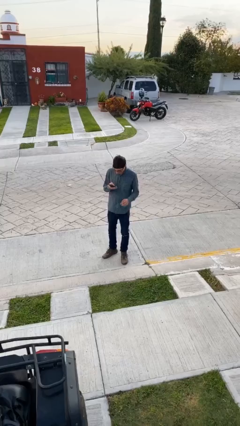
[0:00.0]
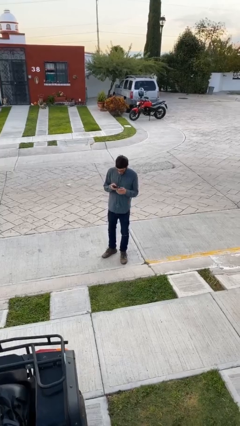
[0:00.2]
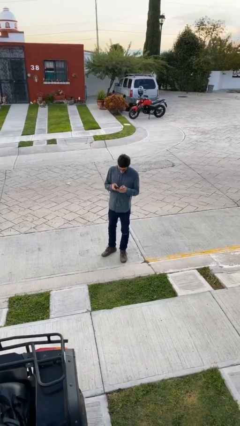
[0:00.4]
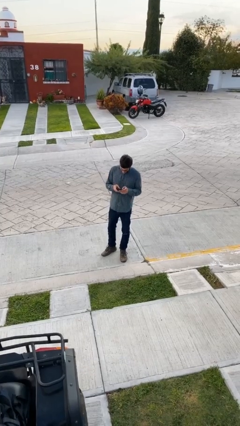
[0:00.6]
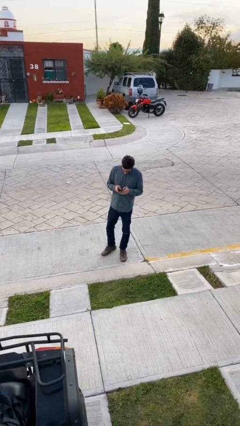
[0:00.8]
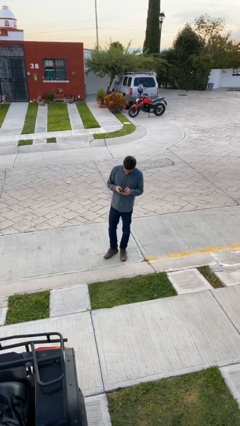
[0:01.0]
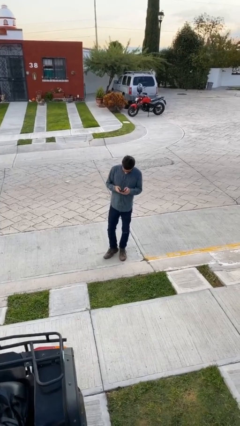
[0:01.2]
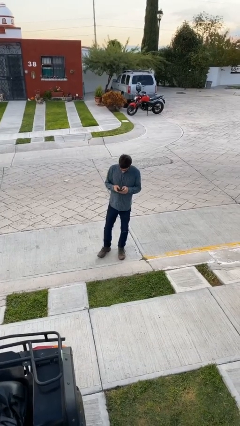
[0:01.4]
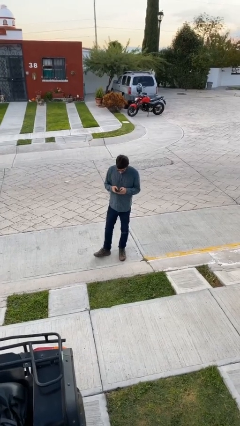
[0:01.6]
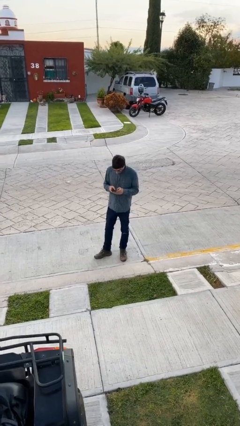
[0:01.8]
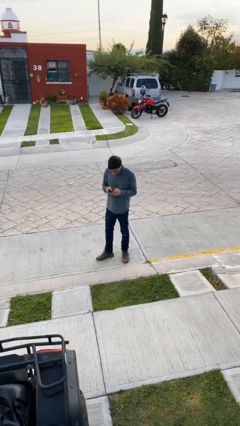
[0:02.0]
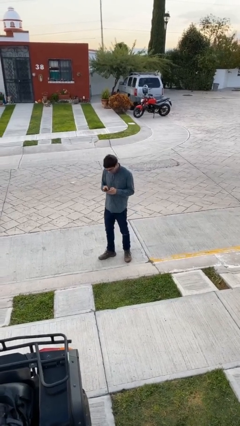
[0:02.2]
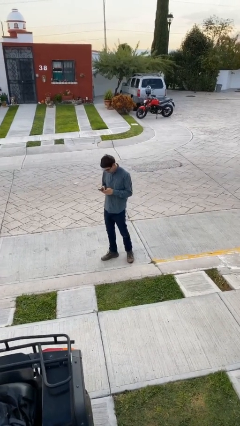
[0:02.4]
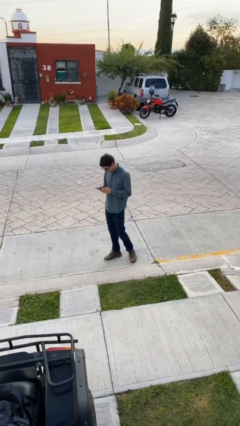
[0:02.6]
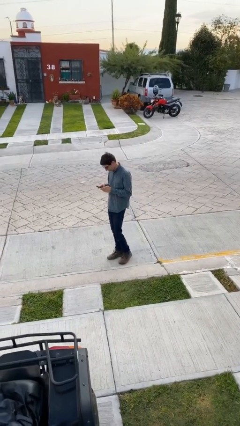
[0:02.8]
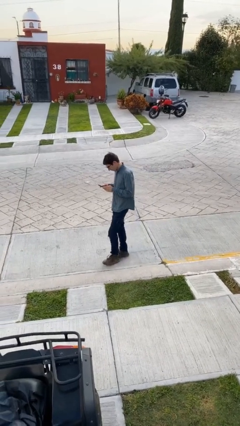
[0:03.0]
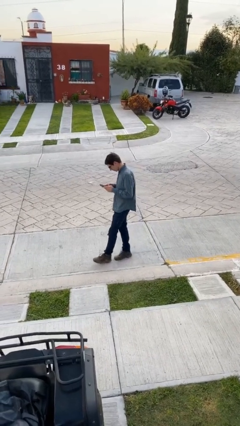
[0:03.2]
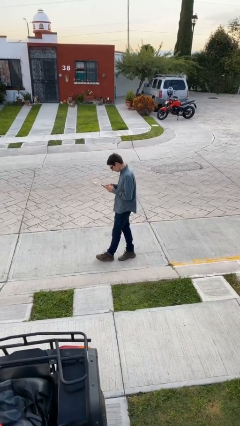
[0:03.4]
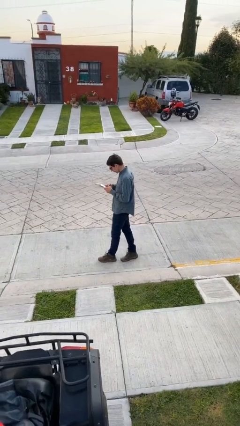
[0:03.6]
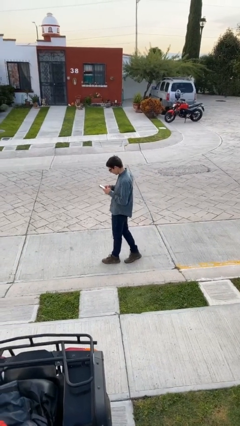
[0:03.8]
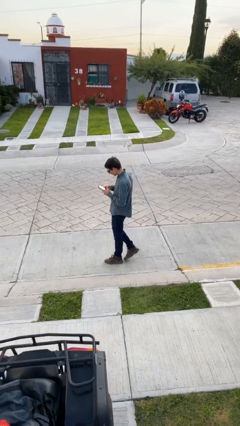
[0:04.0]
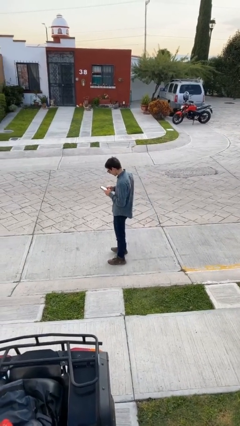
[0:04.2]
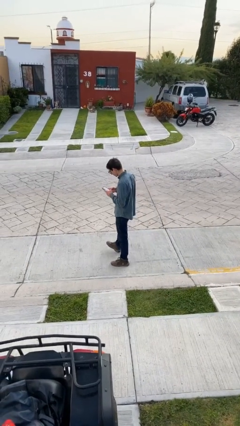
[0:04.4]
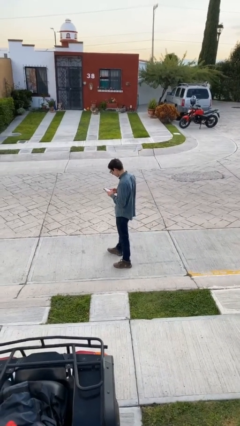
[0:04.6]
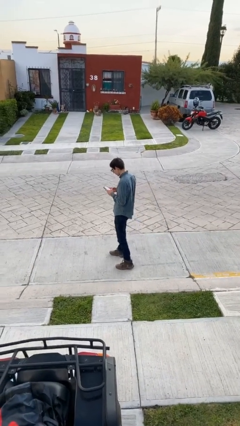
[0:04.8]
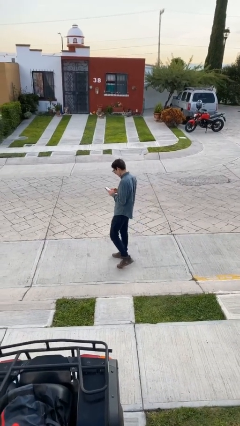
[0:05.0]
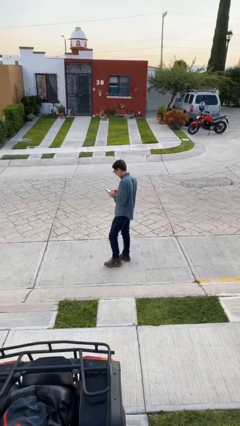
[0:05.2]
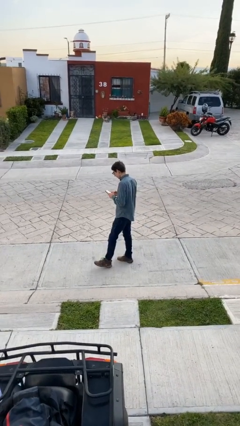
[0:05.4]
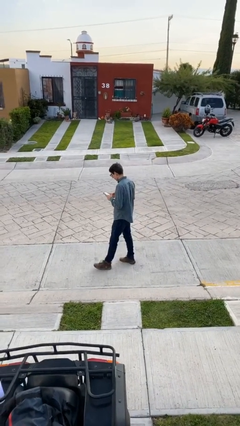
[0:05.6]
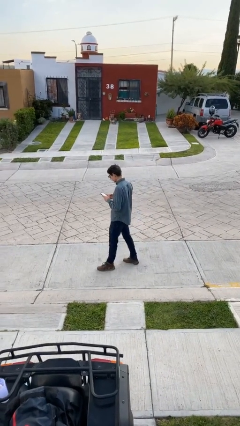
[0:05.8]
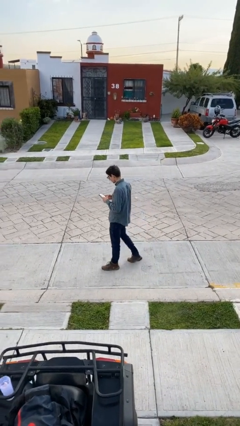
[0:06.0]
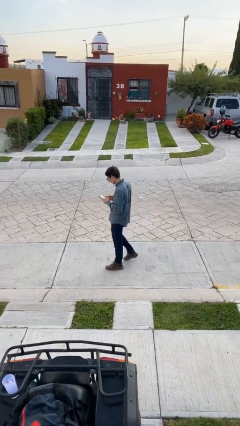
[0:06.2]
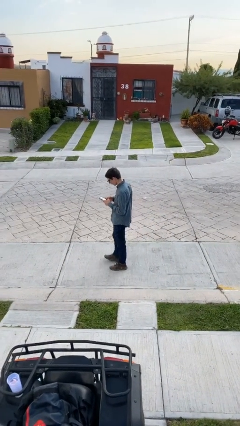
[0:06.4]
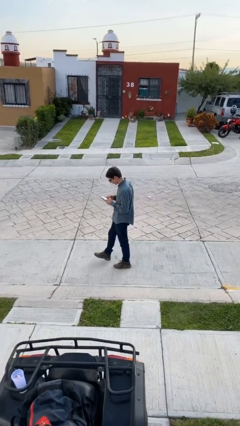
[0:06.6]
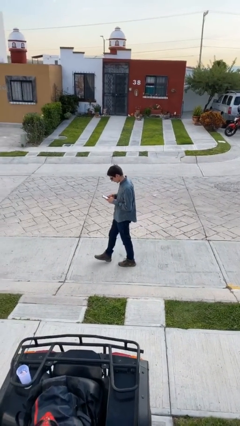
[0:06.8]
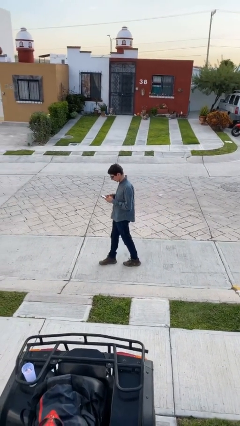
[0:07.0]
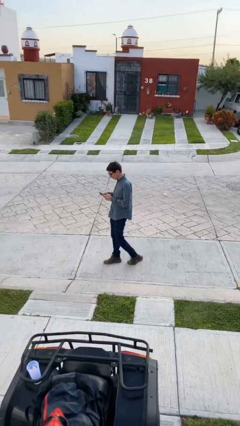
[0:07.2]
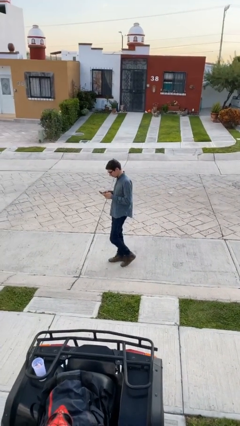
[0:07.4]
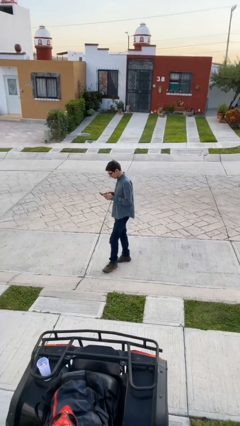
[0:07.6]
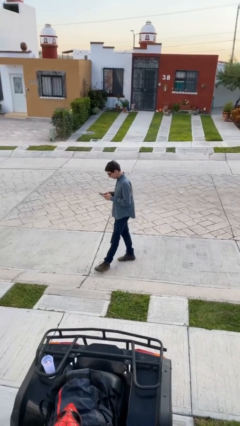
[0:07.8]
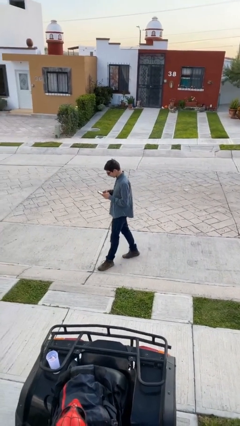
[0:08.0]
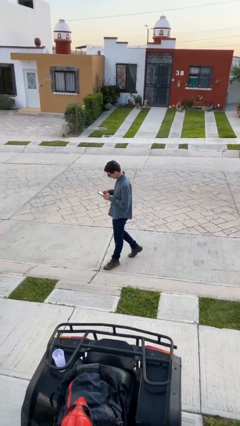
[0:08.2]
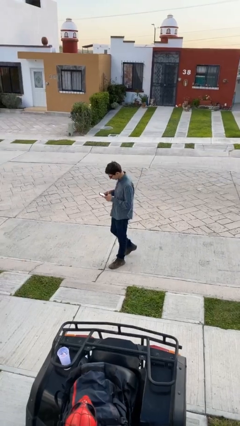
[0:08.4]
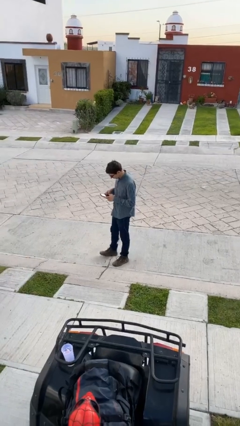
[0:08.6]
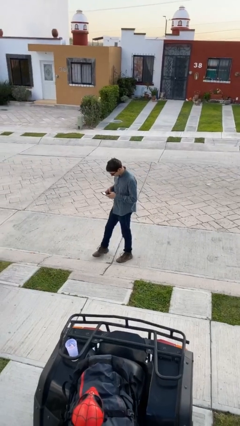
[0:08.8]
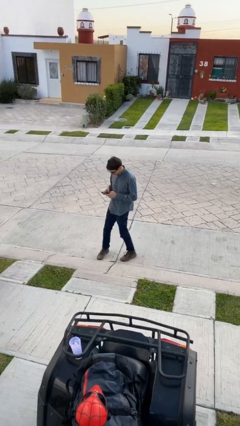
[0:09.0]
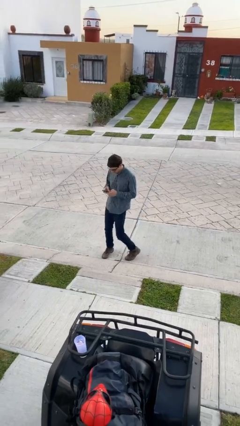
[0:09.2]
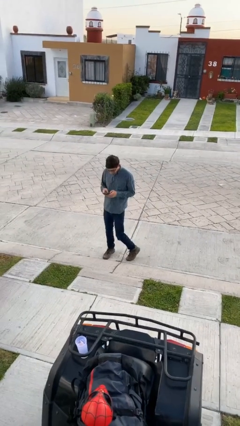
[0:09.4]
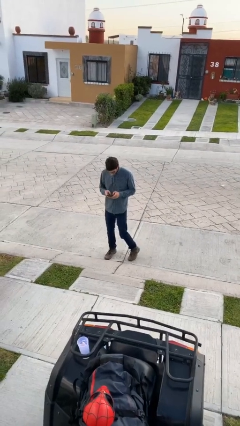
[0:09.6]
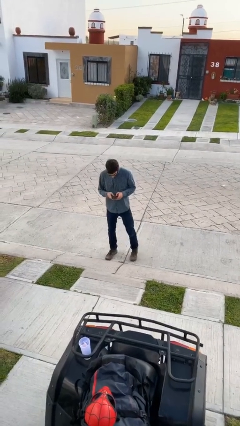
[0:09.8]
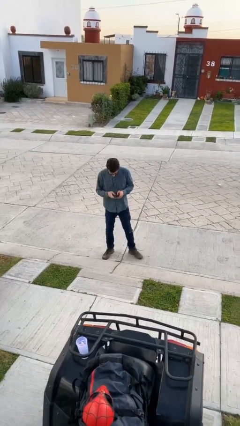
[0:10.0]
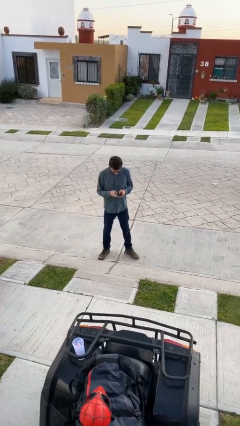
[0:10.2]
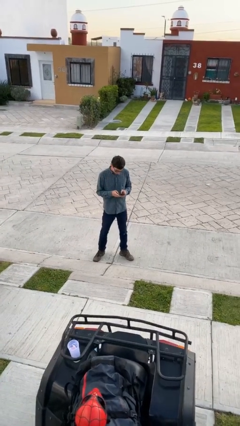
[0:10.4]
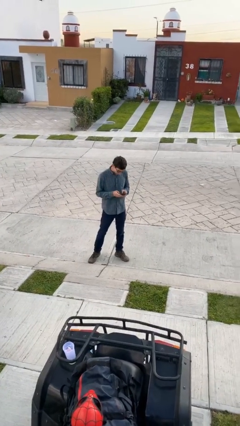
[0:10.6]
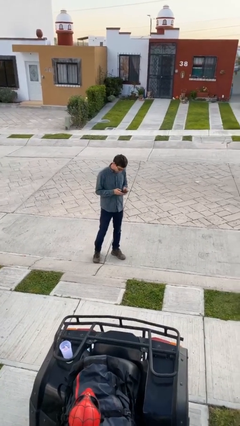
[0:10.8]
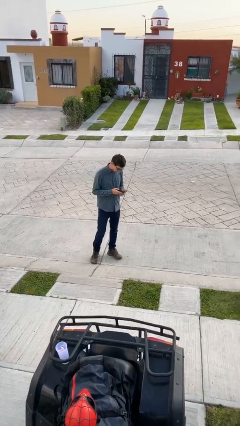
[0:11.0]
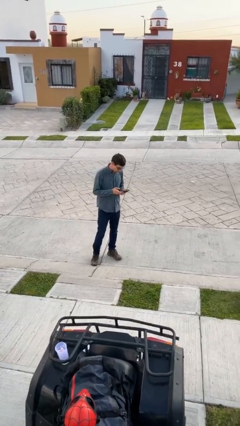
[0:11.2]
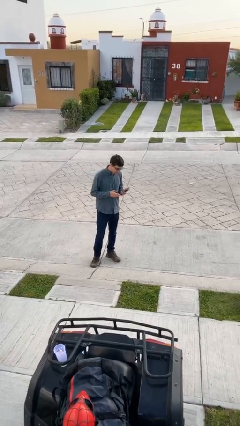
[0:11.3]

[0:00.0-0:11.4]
person texts on phone

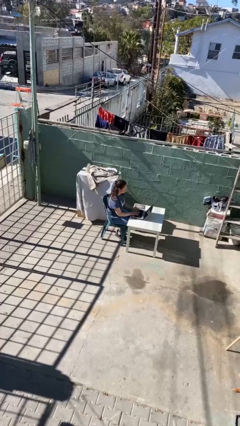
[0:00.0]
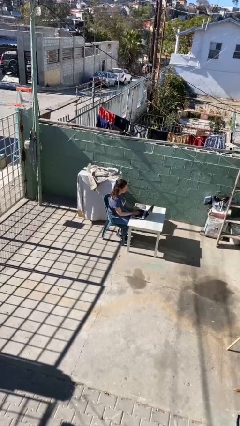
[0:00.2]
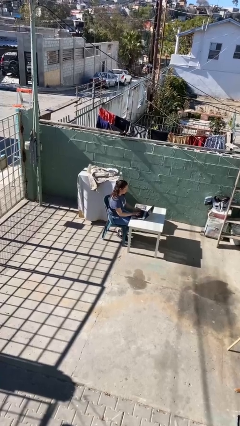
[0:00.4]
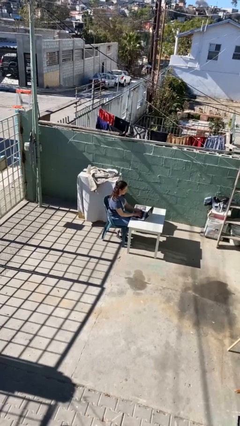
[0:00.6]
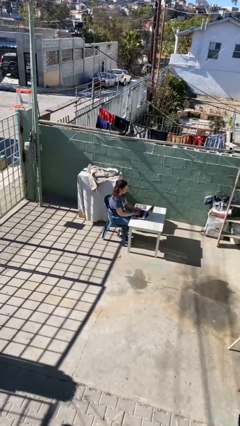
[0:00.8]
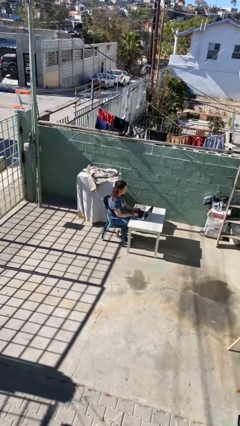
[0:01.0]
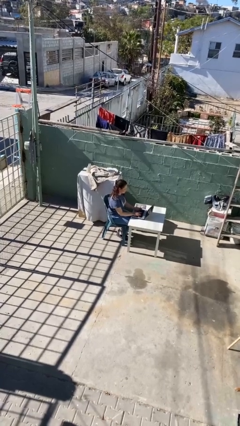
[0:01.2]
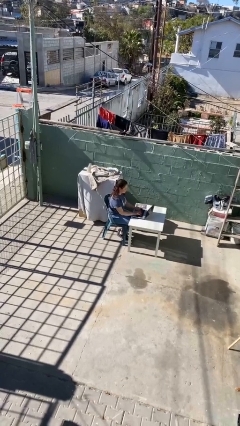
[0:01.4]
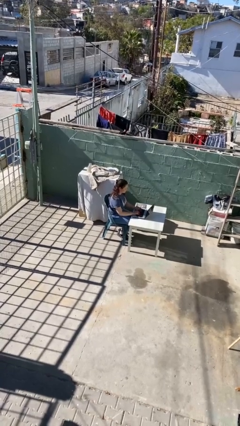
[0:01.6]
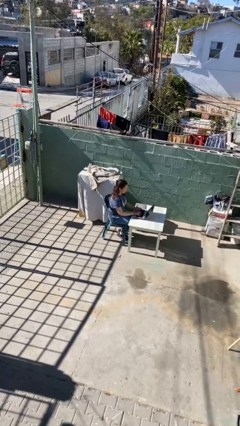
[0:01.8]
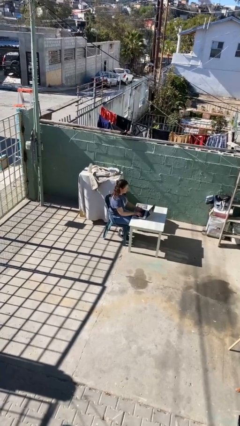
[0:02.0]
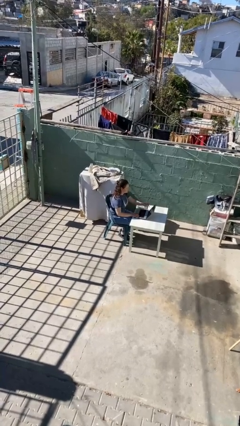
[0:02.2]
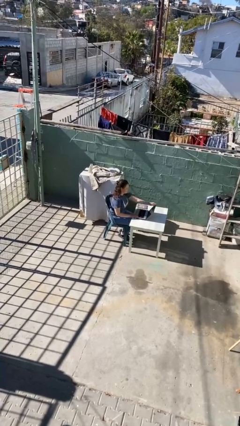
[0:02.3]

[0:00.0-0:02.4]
person interacts with laptop

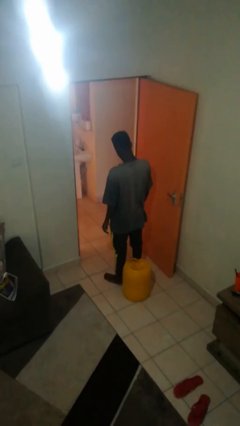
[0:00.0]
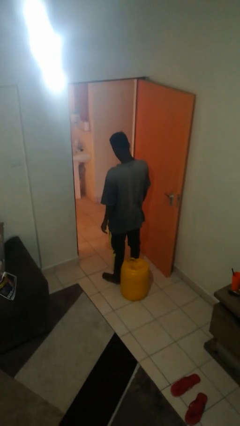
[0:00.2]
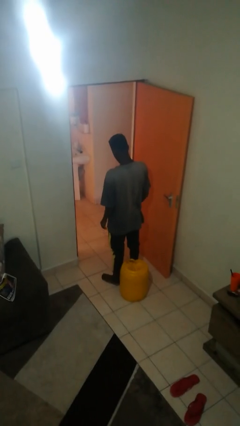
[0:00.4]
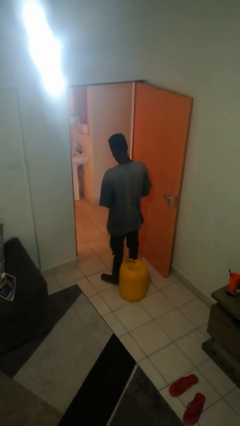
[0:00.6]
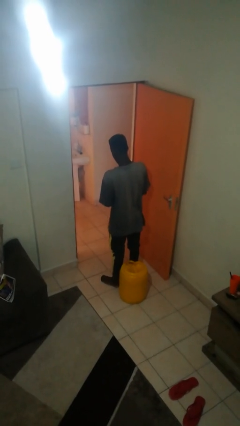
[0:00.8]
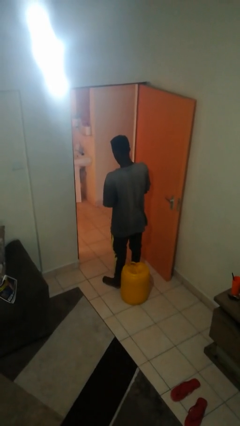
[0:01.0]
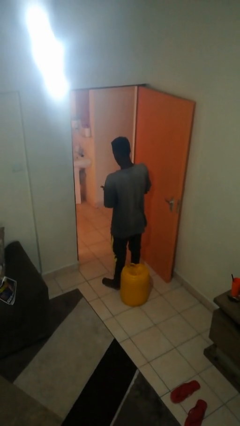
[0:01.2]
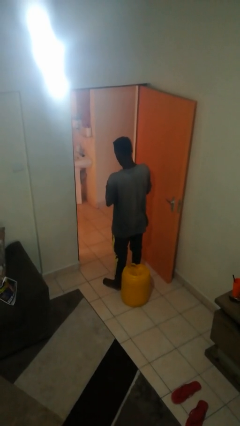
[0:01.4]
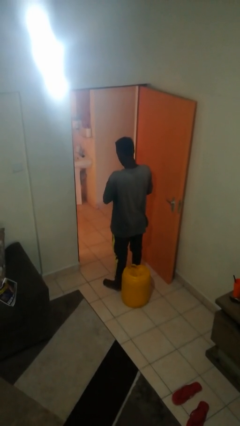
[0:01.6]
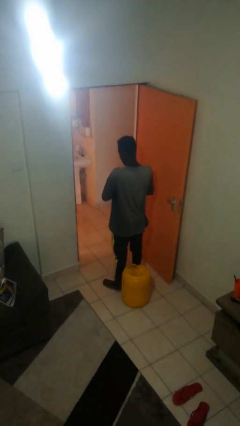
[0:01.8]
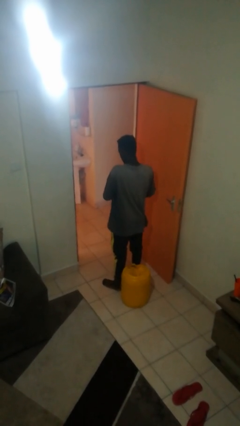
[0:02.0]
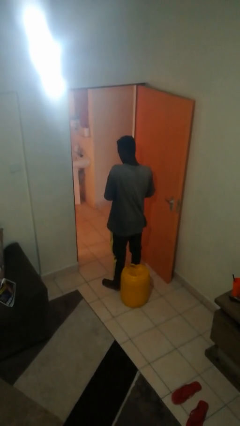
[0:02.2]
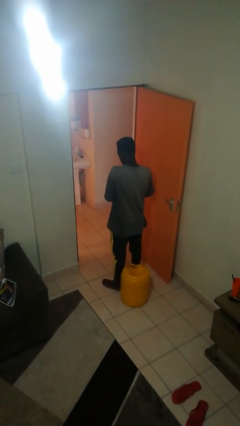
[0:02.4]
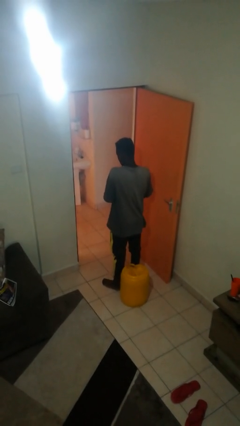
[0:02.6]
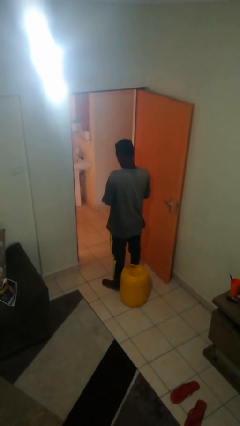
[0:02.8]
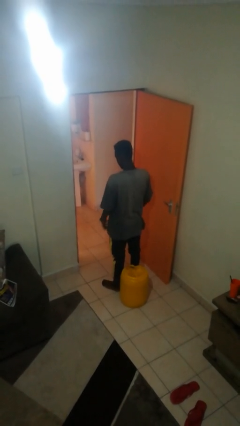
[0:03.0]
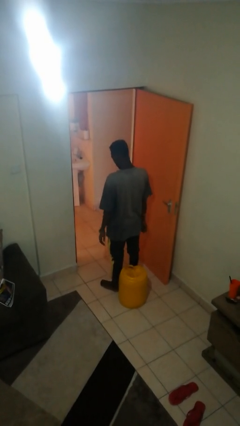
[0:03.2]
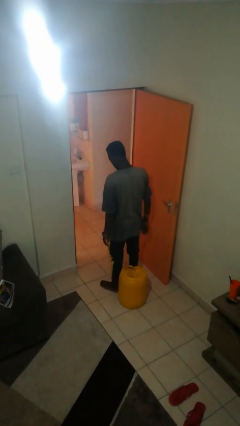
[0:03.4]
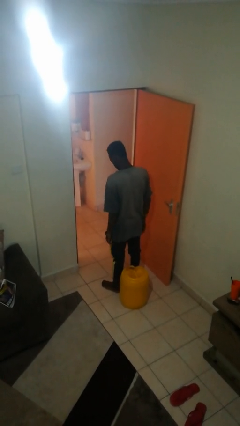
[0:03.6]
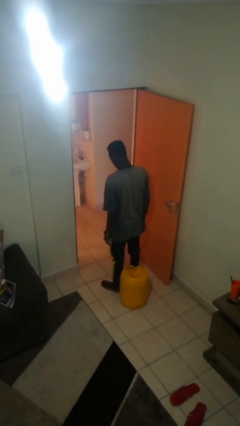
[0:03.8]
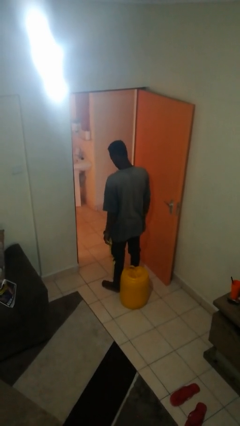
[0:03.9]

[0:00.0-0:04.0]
person puts on wristwatch

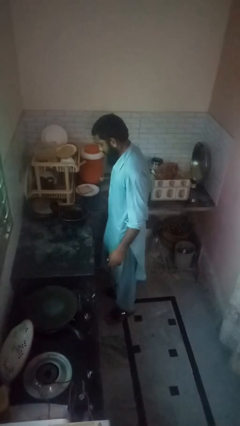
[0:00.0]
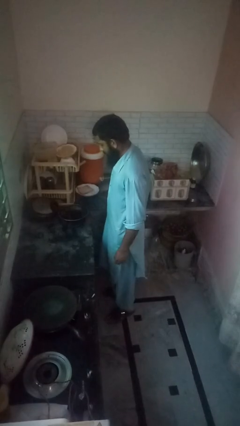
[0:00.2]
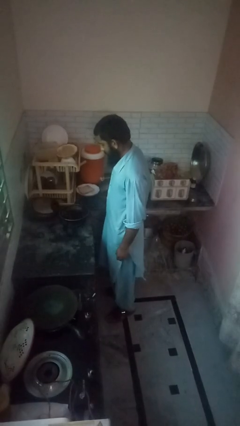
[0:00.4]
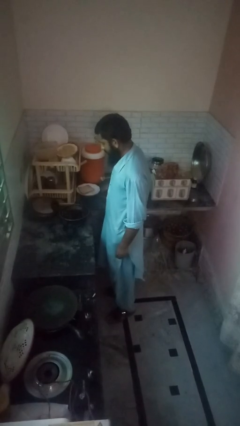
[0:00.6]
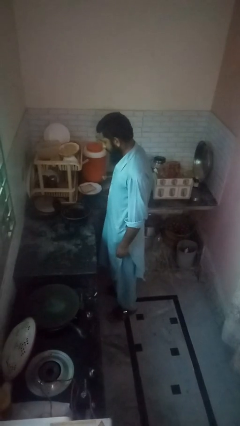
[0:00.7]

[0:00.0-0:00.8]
person burns hand
